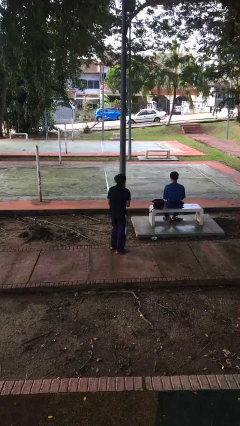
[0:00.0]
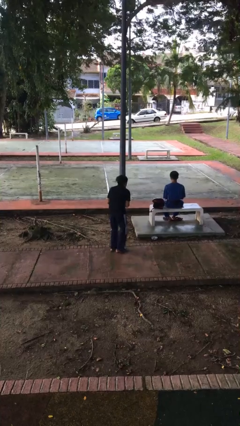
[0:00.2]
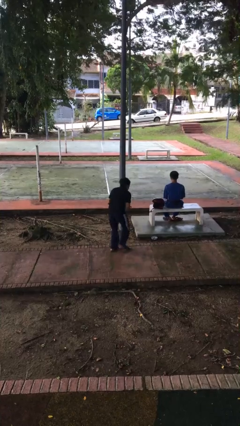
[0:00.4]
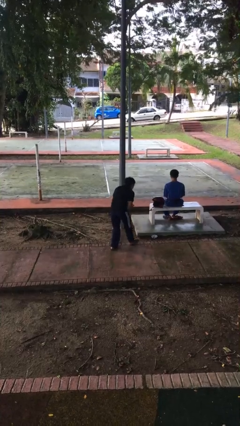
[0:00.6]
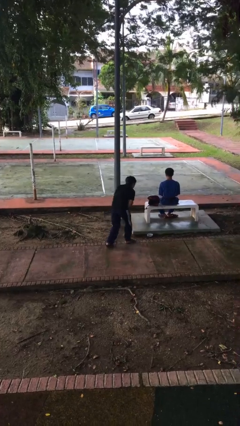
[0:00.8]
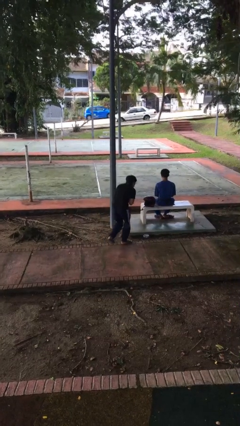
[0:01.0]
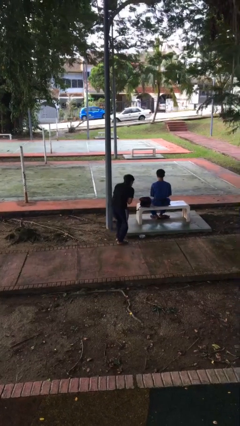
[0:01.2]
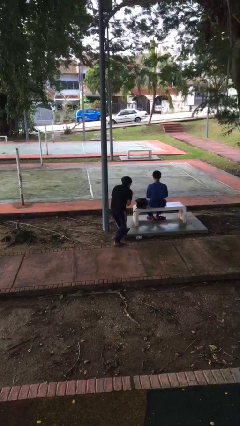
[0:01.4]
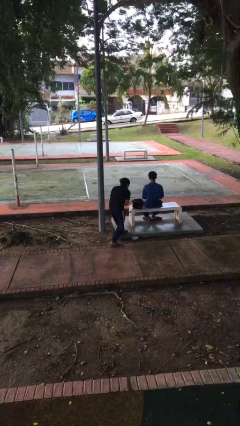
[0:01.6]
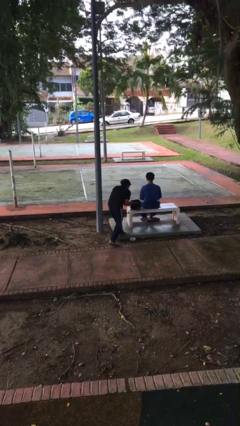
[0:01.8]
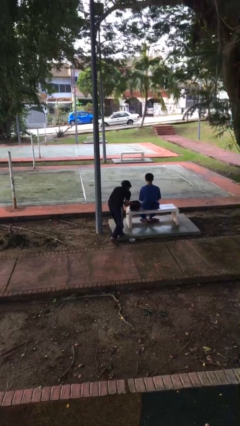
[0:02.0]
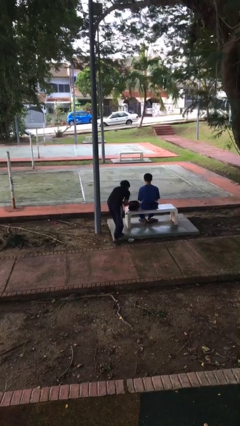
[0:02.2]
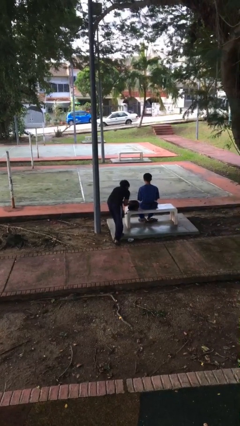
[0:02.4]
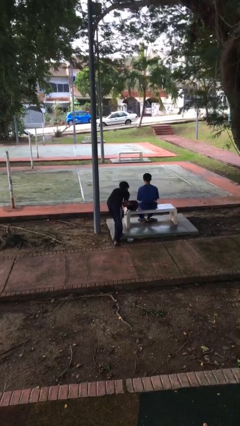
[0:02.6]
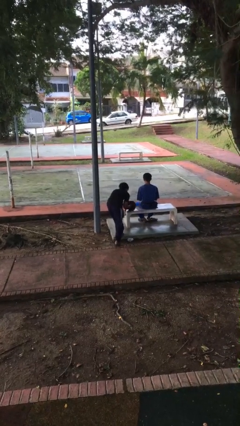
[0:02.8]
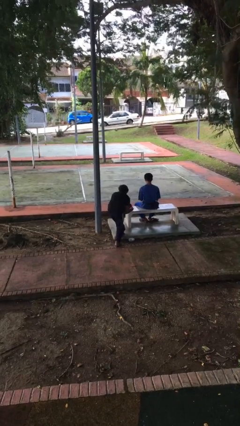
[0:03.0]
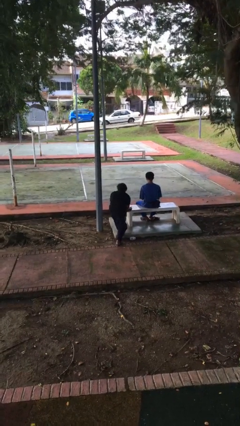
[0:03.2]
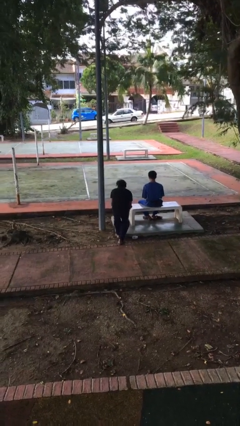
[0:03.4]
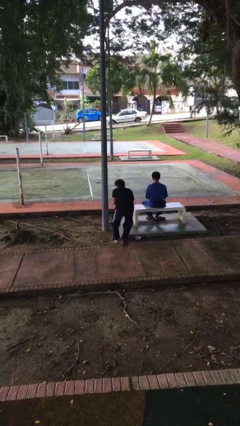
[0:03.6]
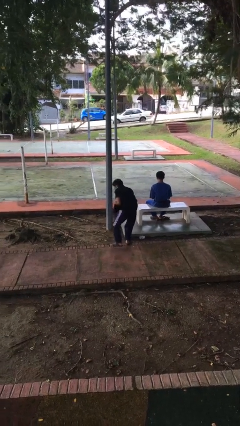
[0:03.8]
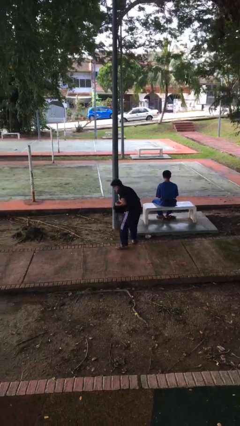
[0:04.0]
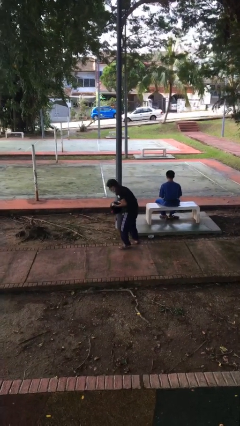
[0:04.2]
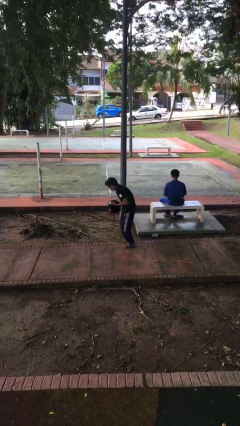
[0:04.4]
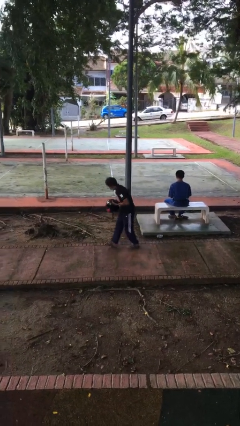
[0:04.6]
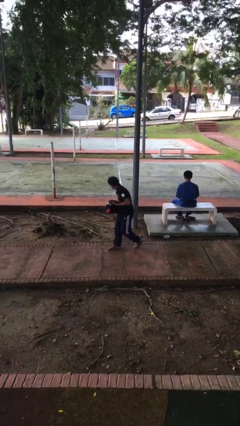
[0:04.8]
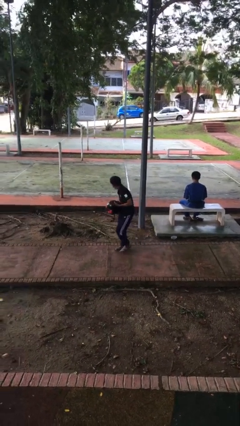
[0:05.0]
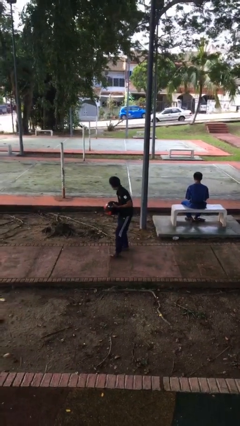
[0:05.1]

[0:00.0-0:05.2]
person steals object from person

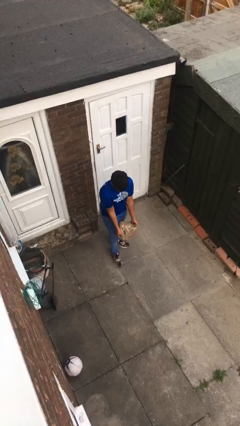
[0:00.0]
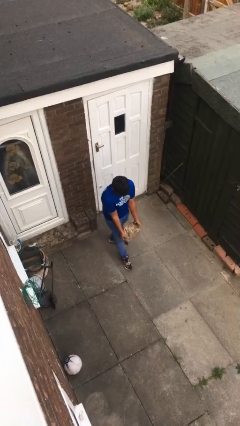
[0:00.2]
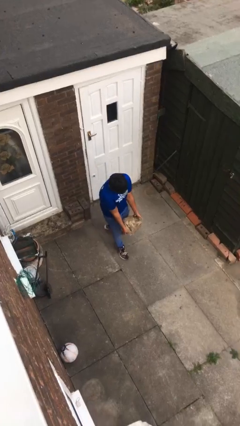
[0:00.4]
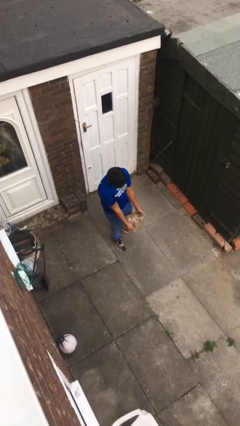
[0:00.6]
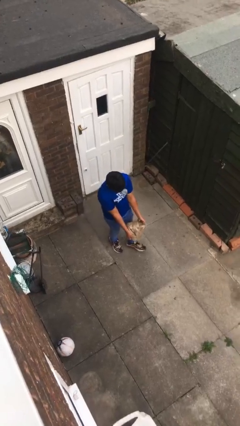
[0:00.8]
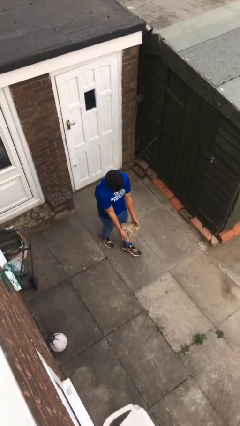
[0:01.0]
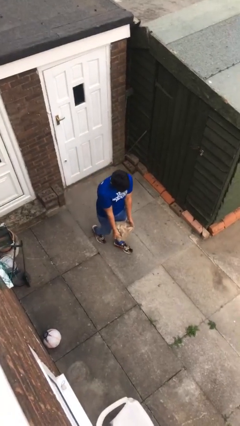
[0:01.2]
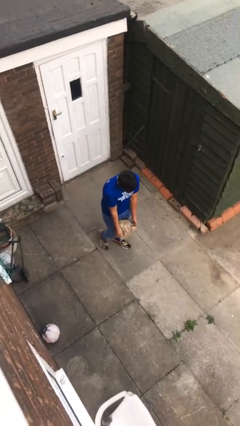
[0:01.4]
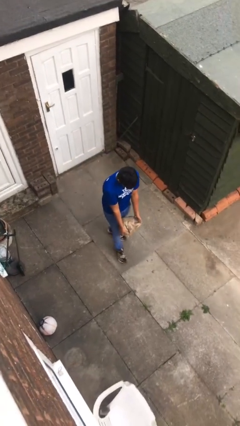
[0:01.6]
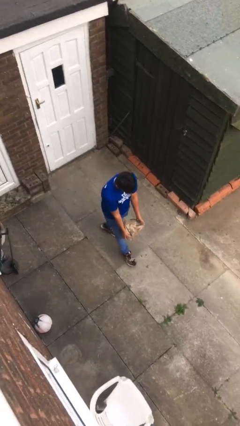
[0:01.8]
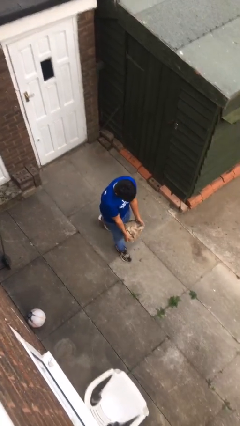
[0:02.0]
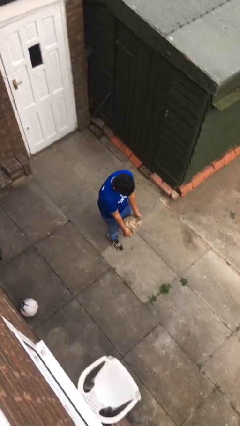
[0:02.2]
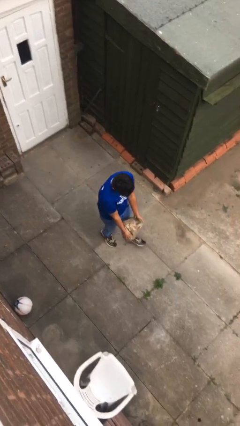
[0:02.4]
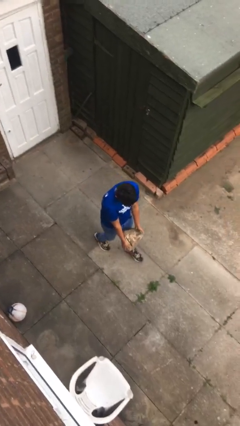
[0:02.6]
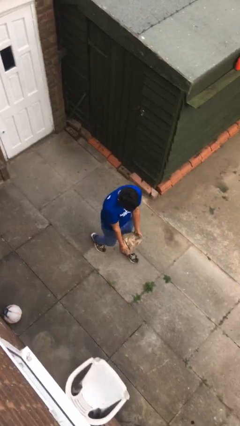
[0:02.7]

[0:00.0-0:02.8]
person carries heavy object

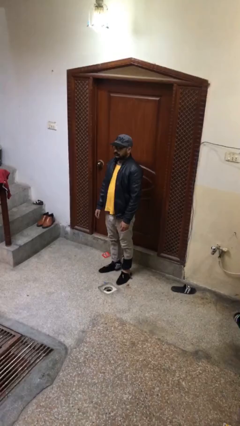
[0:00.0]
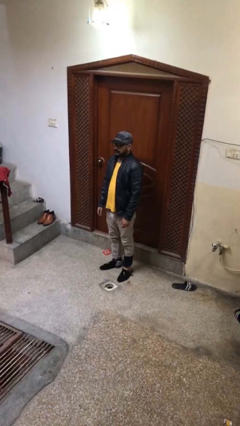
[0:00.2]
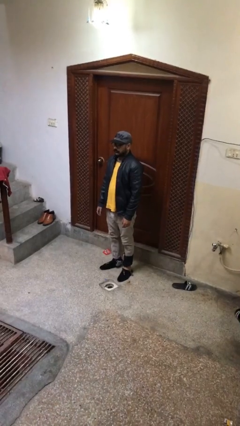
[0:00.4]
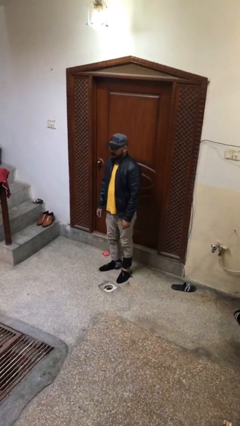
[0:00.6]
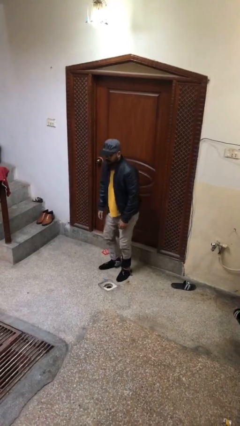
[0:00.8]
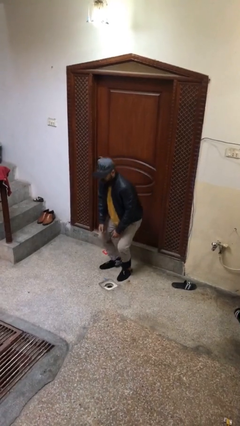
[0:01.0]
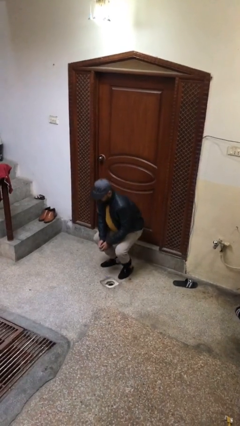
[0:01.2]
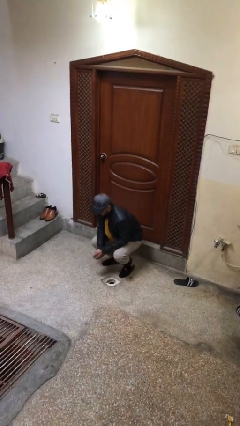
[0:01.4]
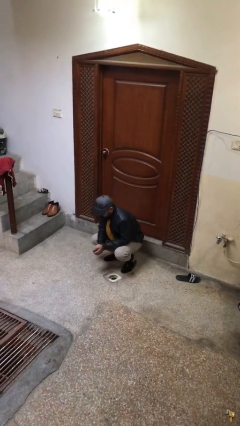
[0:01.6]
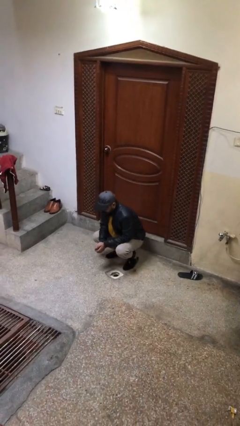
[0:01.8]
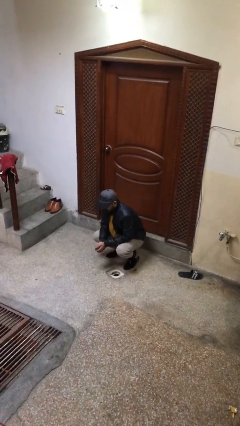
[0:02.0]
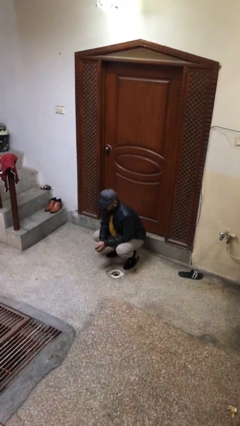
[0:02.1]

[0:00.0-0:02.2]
person sits down

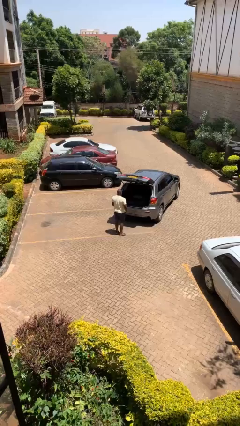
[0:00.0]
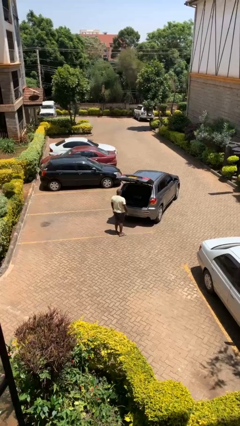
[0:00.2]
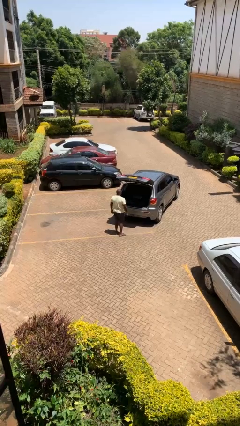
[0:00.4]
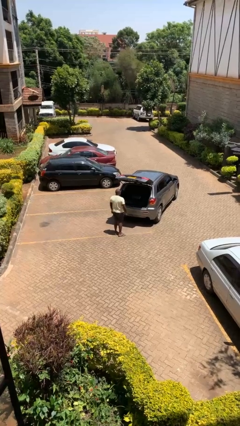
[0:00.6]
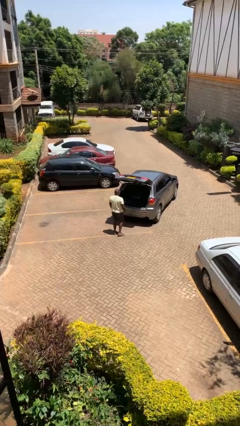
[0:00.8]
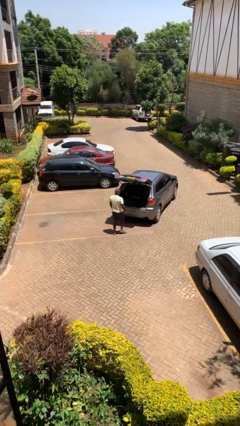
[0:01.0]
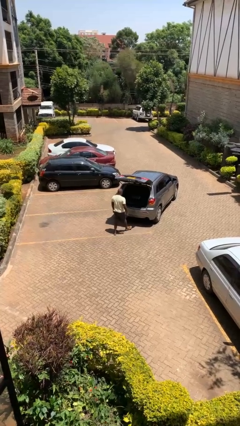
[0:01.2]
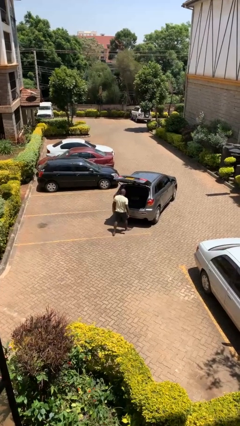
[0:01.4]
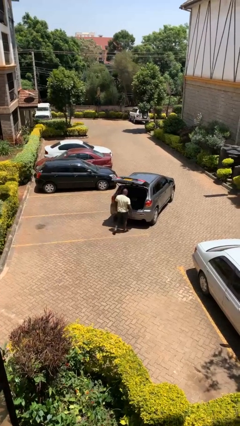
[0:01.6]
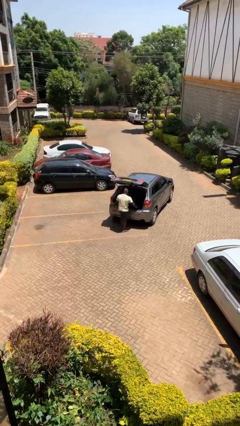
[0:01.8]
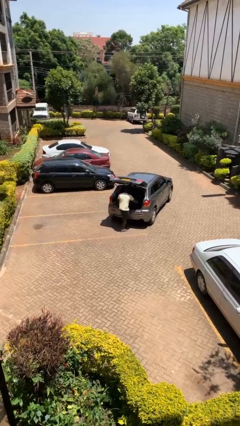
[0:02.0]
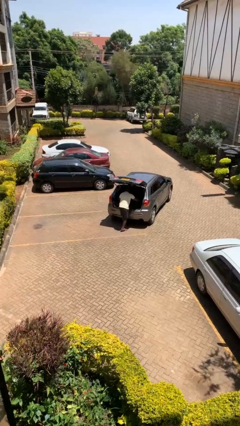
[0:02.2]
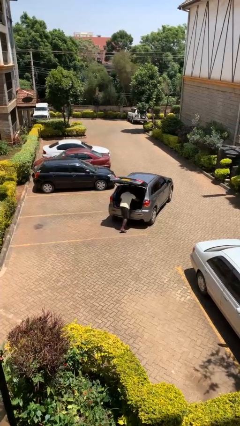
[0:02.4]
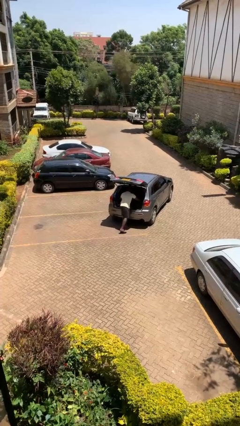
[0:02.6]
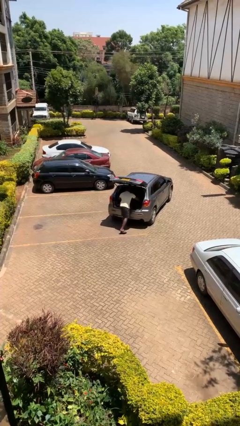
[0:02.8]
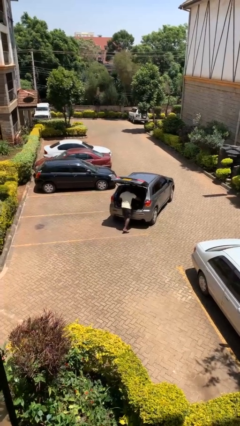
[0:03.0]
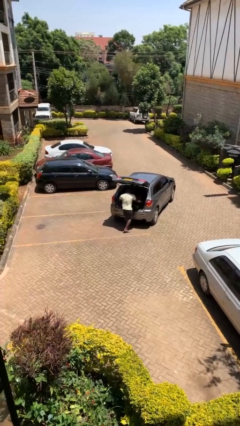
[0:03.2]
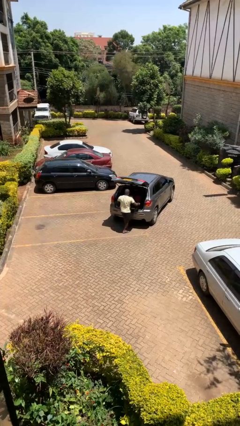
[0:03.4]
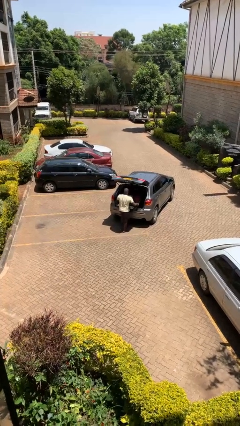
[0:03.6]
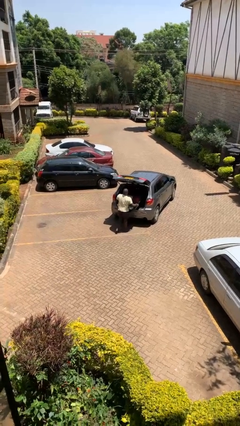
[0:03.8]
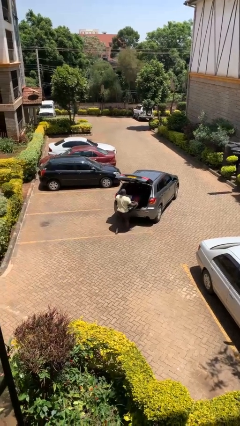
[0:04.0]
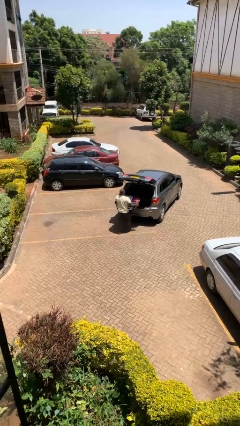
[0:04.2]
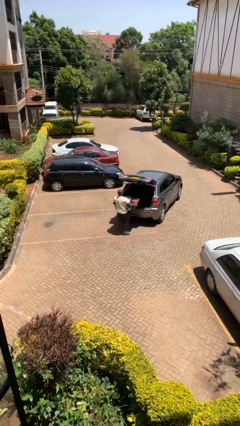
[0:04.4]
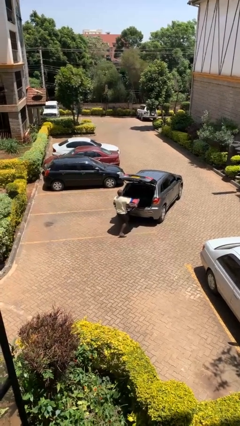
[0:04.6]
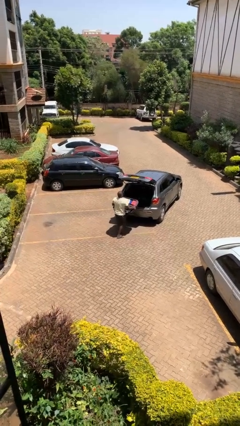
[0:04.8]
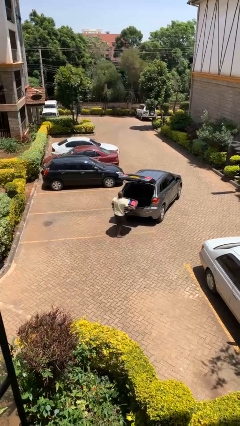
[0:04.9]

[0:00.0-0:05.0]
person unloads car

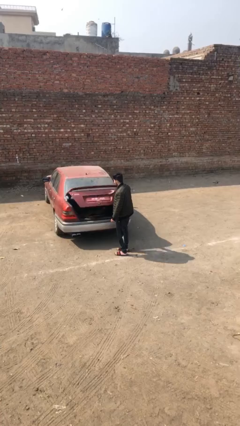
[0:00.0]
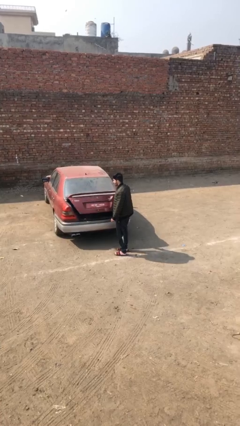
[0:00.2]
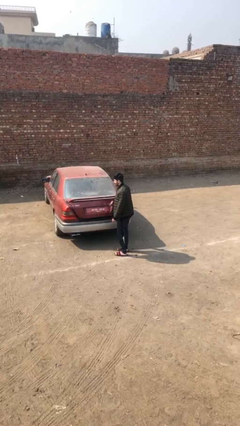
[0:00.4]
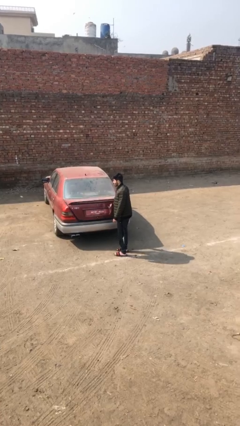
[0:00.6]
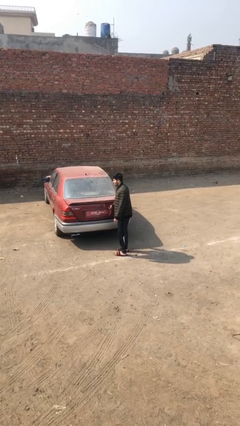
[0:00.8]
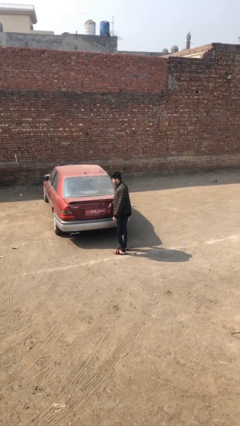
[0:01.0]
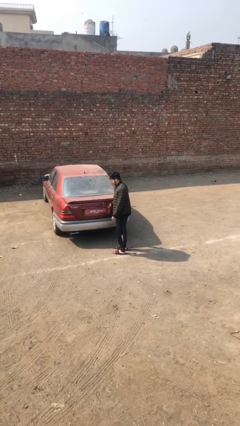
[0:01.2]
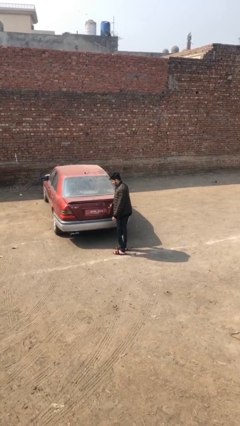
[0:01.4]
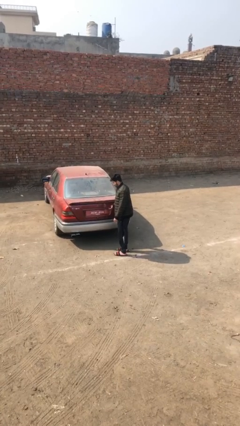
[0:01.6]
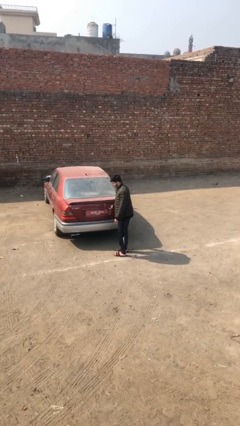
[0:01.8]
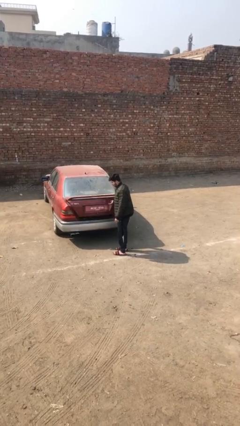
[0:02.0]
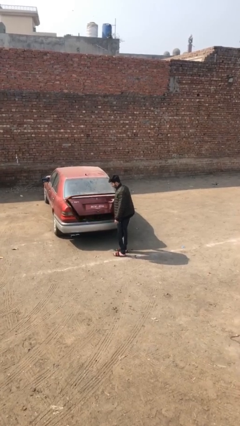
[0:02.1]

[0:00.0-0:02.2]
person closes car trunk

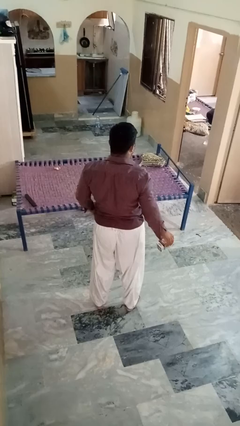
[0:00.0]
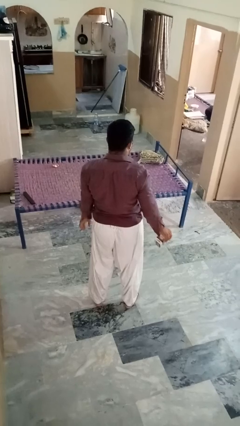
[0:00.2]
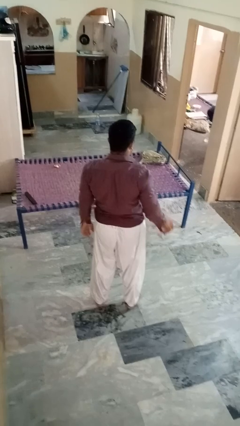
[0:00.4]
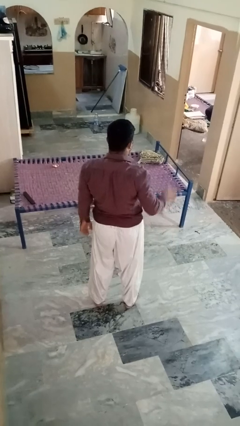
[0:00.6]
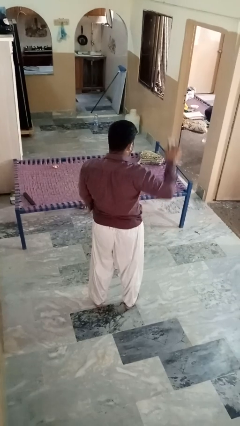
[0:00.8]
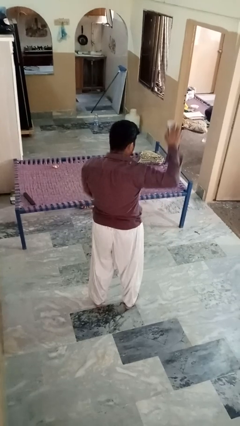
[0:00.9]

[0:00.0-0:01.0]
person drops object
